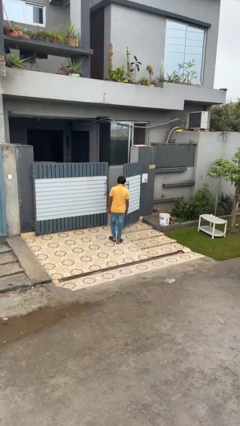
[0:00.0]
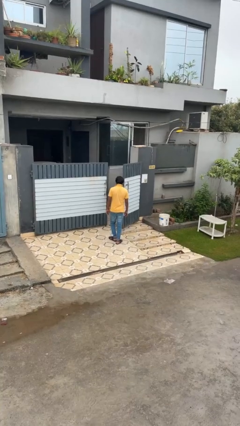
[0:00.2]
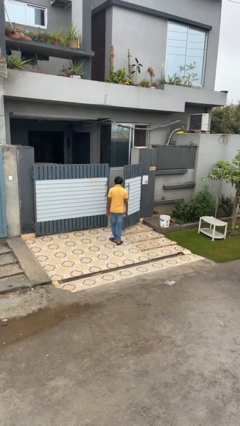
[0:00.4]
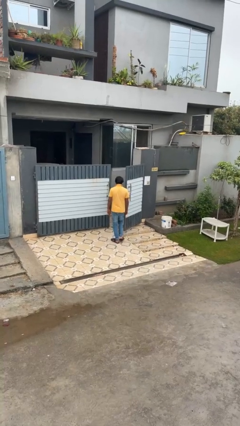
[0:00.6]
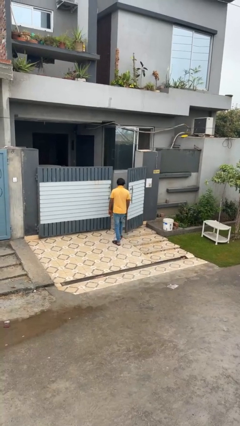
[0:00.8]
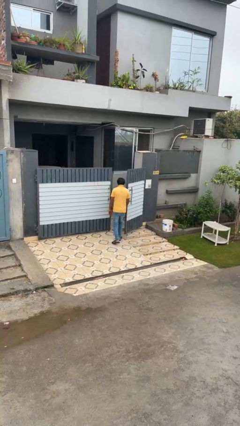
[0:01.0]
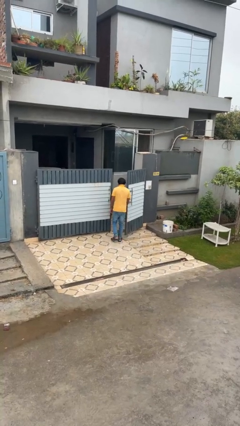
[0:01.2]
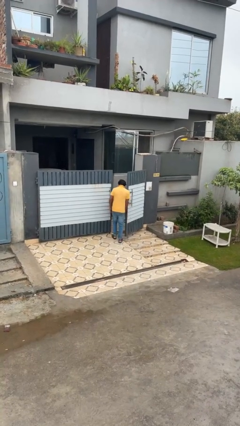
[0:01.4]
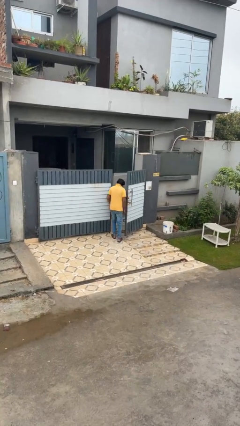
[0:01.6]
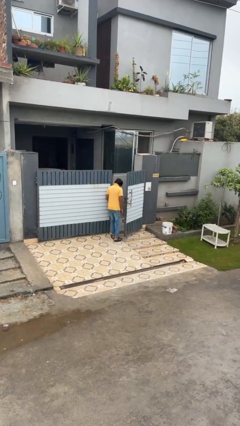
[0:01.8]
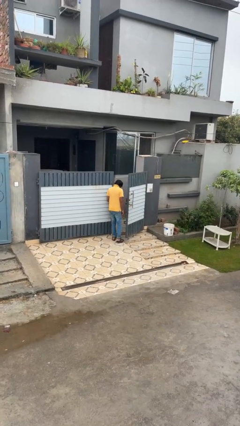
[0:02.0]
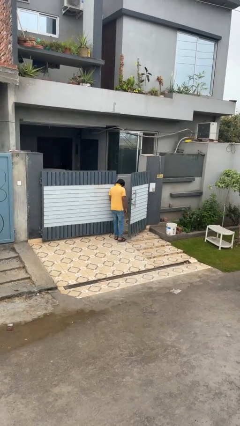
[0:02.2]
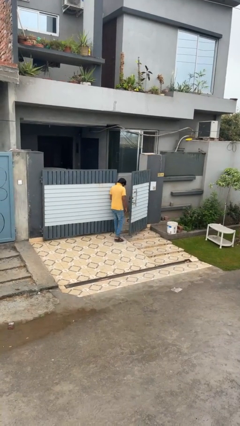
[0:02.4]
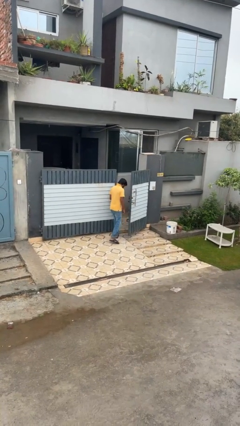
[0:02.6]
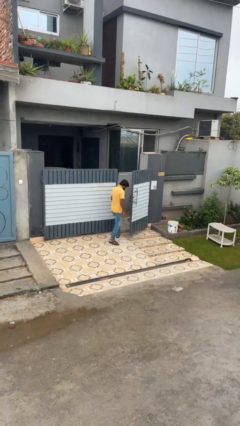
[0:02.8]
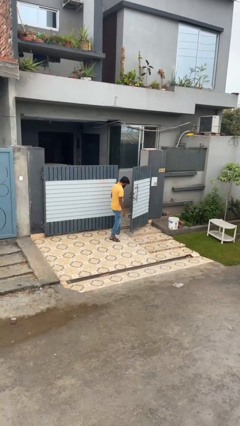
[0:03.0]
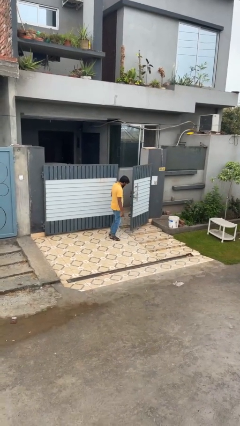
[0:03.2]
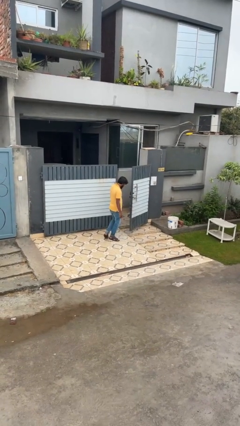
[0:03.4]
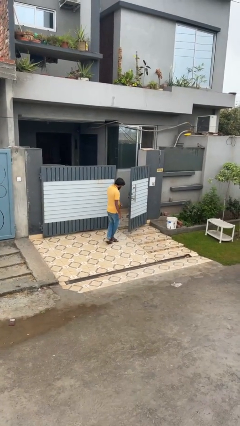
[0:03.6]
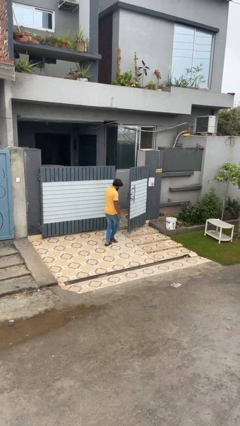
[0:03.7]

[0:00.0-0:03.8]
person bumps into wall

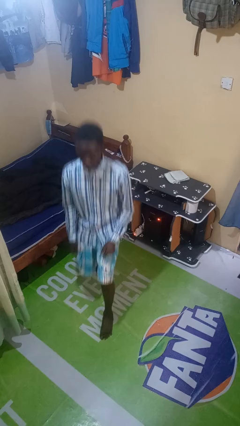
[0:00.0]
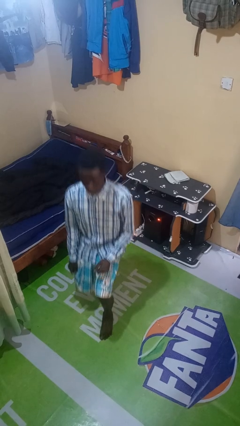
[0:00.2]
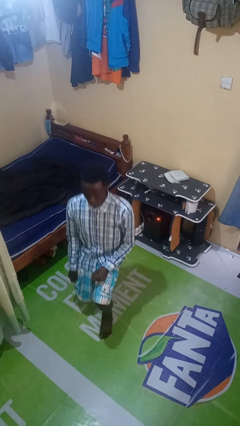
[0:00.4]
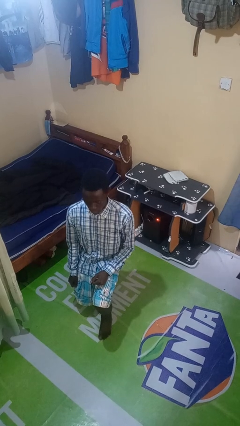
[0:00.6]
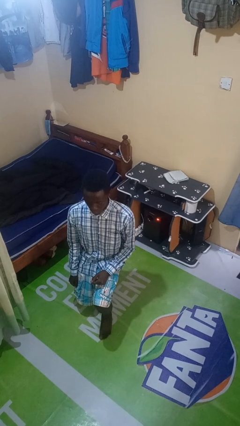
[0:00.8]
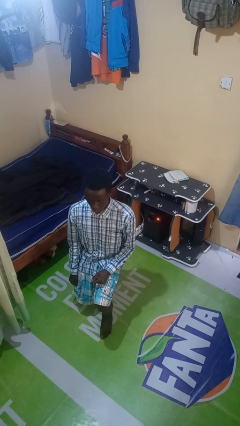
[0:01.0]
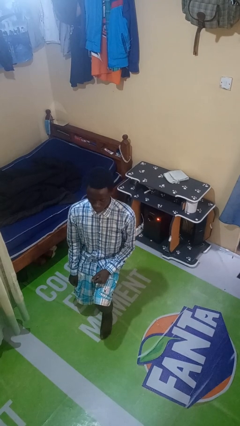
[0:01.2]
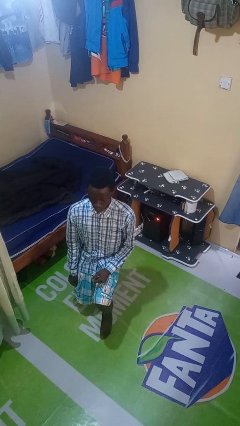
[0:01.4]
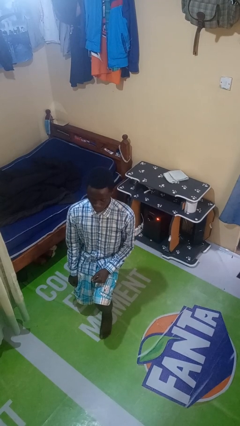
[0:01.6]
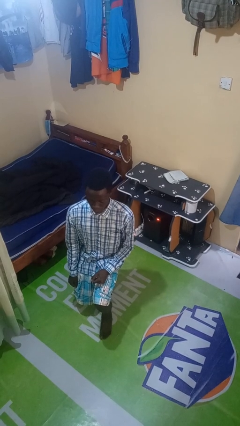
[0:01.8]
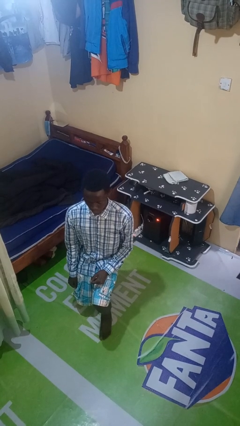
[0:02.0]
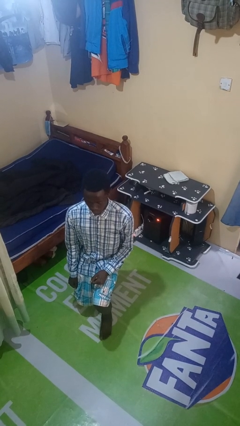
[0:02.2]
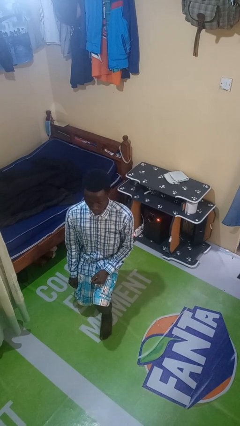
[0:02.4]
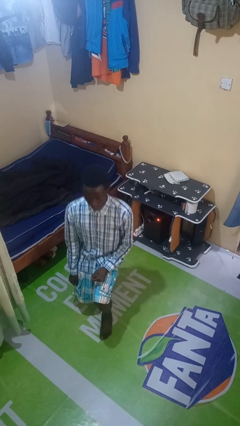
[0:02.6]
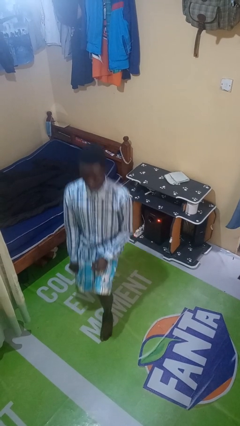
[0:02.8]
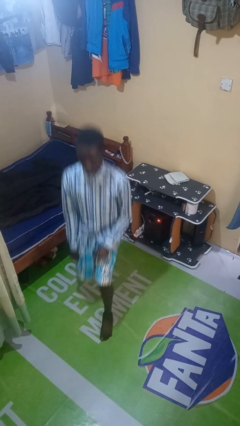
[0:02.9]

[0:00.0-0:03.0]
person exercises with lunges

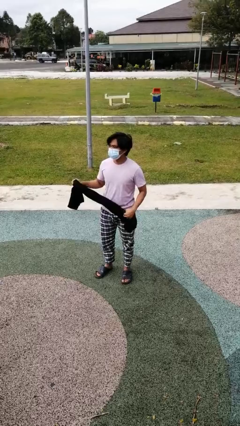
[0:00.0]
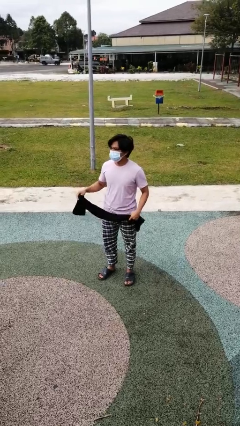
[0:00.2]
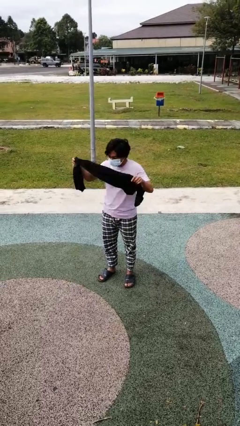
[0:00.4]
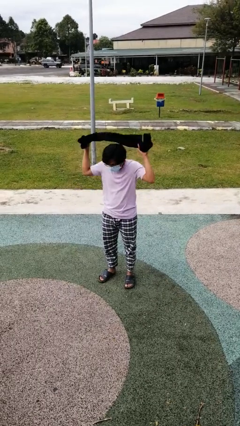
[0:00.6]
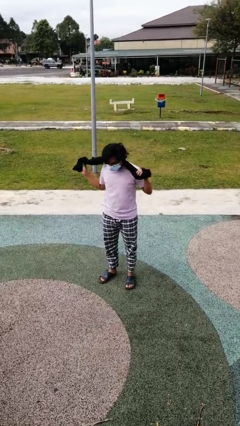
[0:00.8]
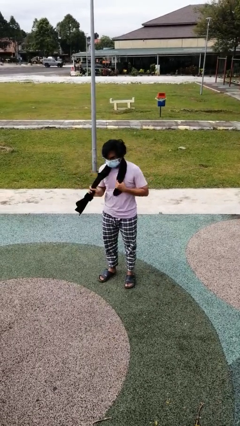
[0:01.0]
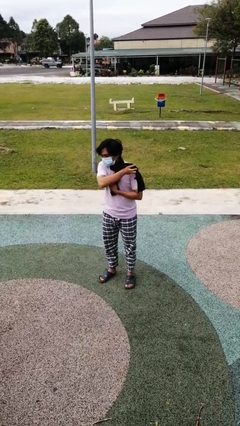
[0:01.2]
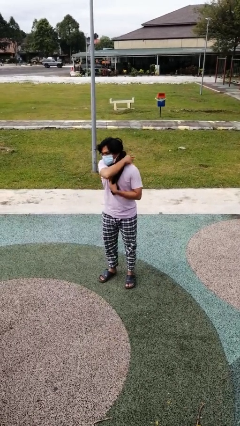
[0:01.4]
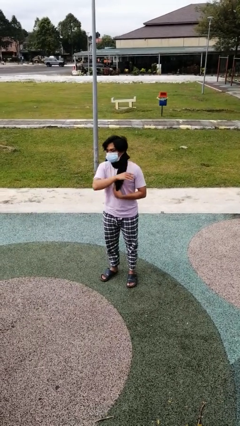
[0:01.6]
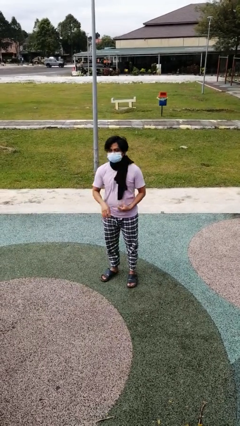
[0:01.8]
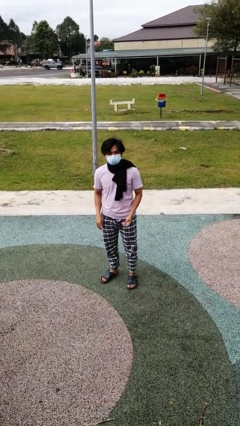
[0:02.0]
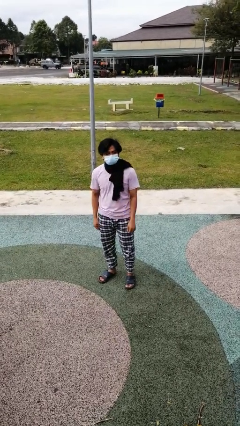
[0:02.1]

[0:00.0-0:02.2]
person puts on scarf

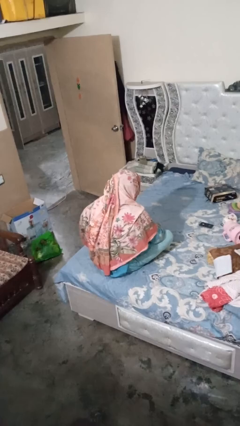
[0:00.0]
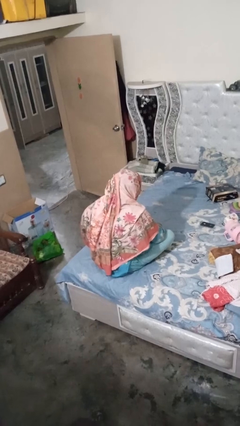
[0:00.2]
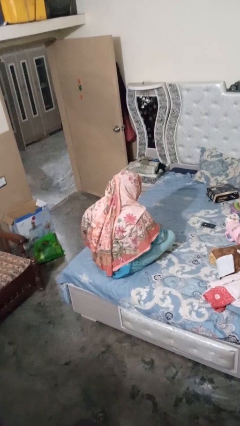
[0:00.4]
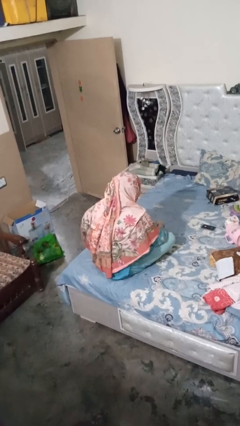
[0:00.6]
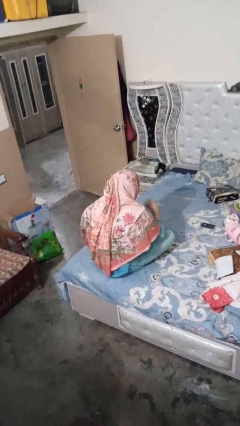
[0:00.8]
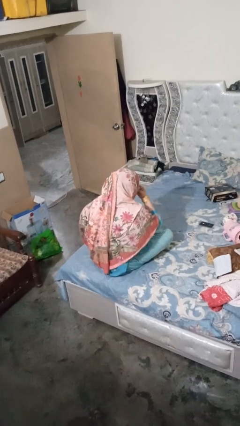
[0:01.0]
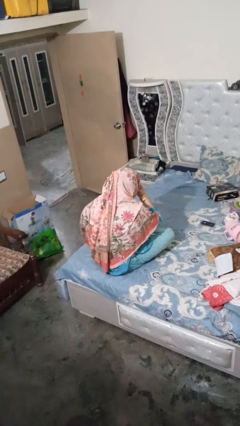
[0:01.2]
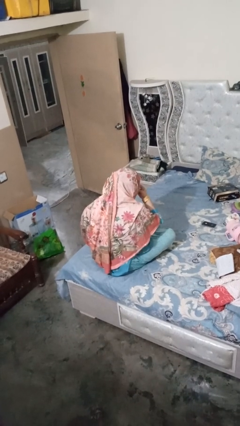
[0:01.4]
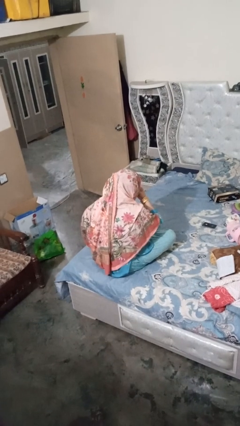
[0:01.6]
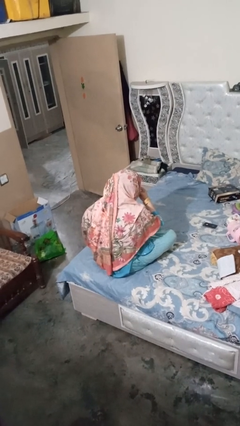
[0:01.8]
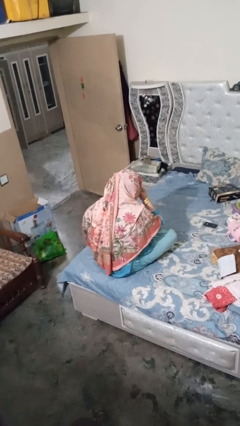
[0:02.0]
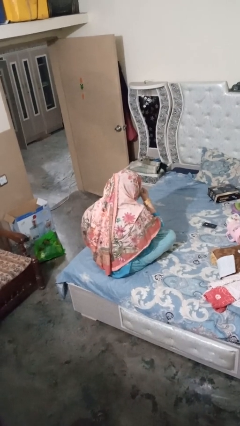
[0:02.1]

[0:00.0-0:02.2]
person blows nose

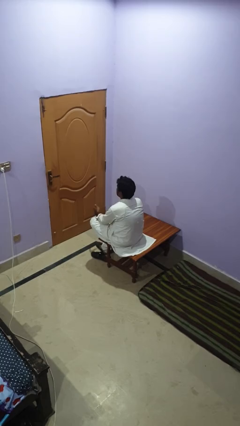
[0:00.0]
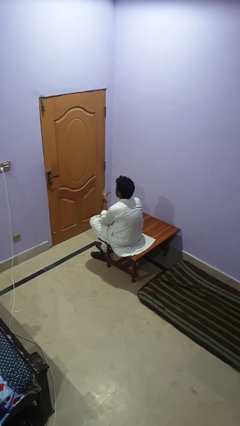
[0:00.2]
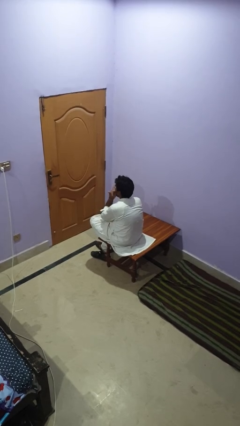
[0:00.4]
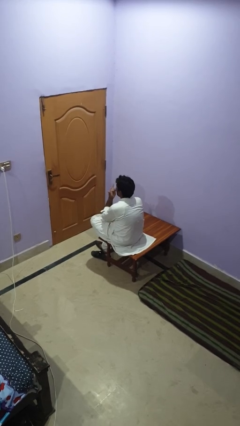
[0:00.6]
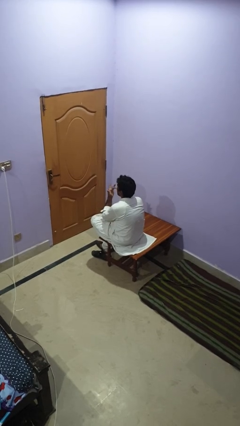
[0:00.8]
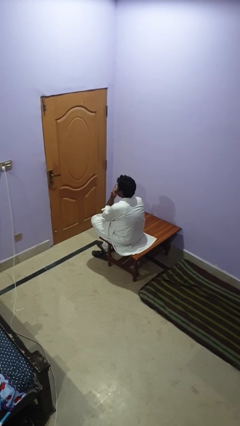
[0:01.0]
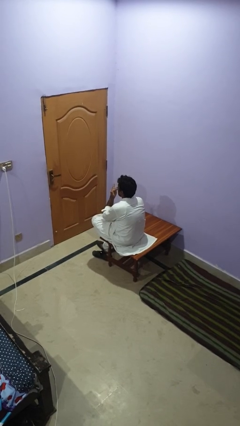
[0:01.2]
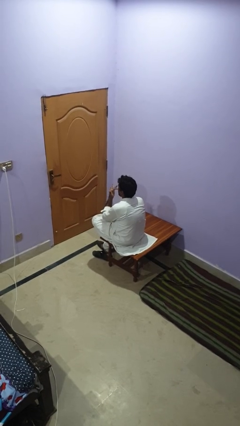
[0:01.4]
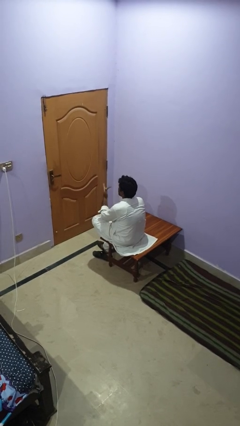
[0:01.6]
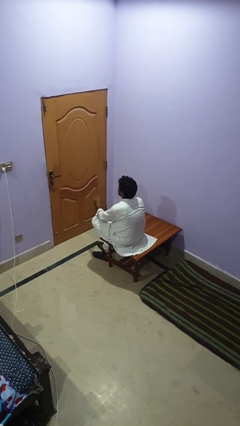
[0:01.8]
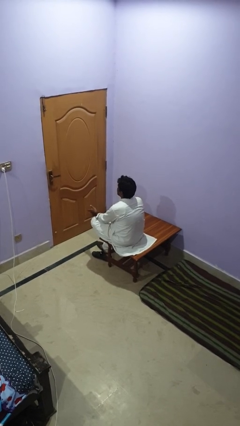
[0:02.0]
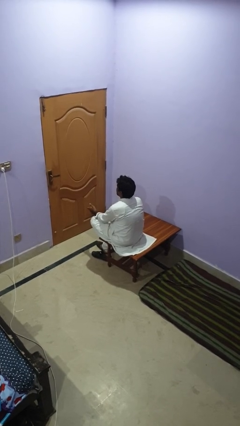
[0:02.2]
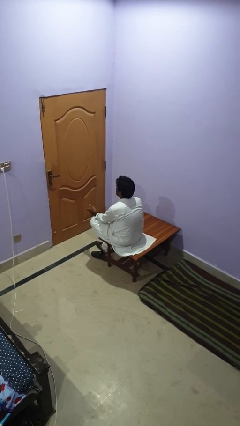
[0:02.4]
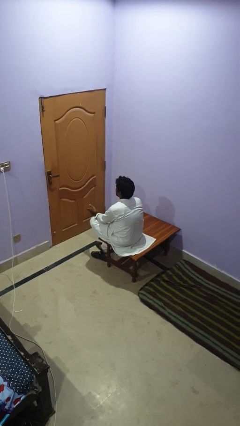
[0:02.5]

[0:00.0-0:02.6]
person licks fingers

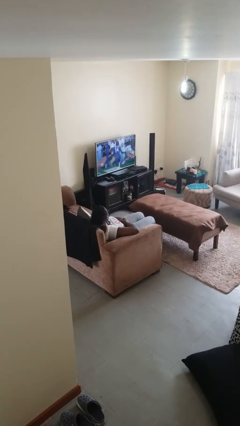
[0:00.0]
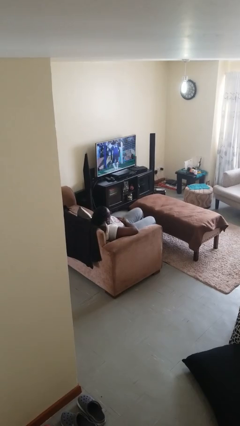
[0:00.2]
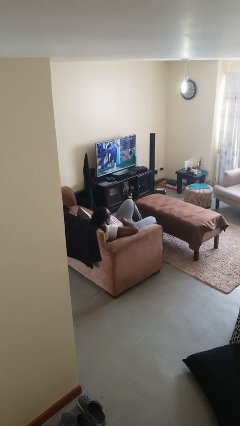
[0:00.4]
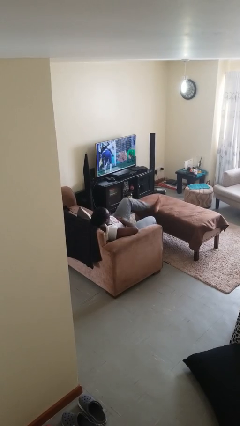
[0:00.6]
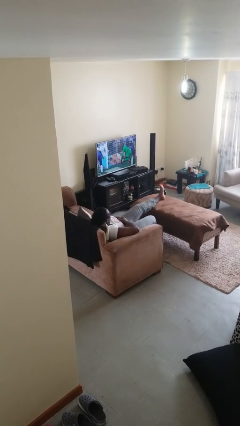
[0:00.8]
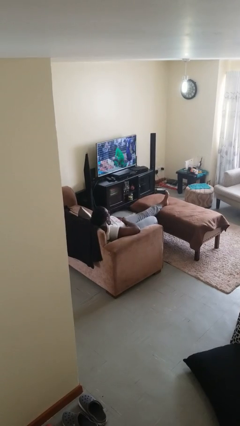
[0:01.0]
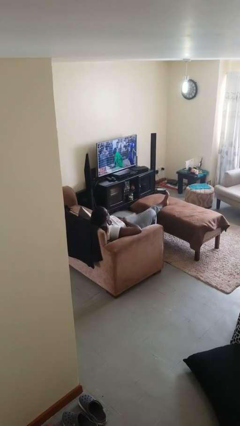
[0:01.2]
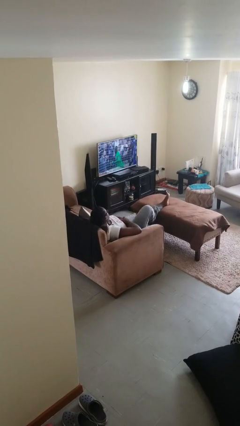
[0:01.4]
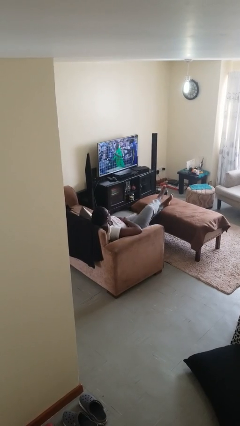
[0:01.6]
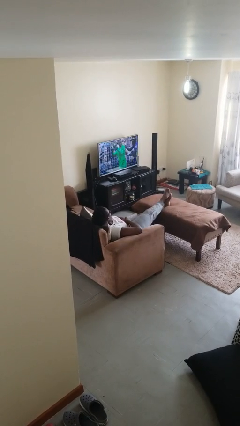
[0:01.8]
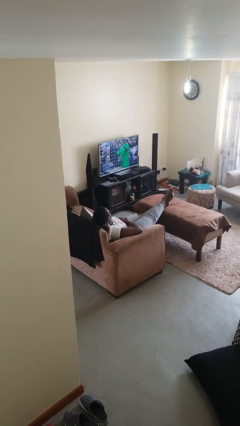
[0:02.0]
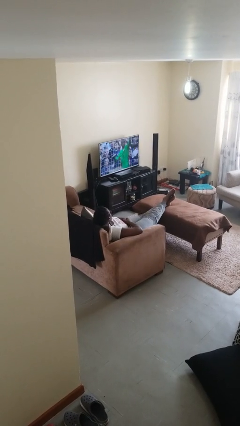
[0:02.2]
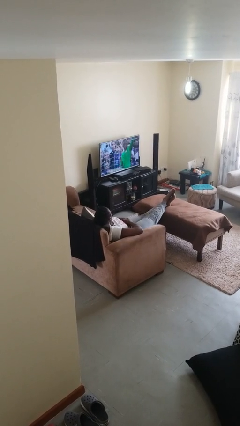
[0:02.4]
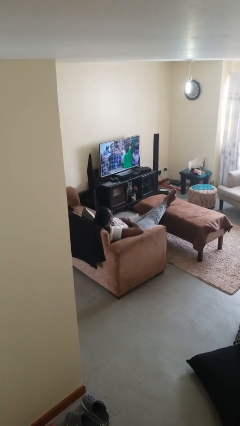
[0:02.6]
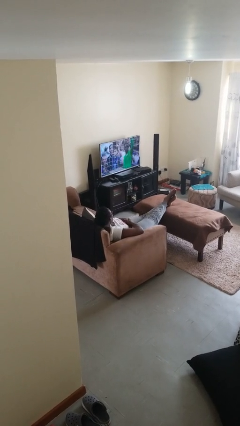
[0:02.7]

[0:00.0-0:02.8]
person puts feet up

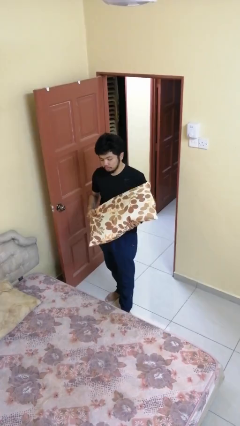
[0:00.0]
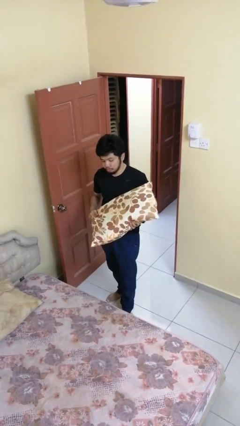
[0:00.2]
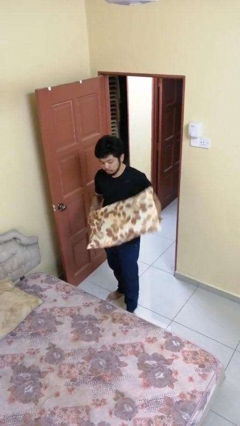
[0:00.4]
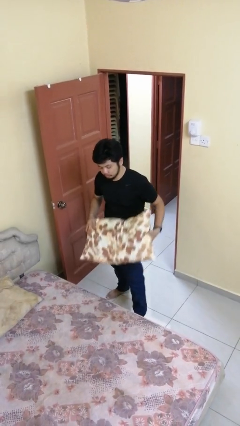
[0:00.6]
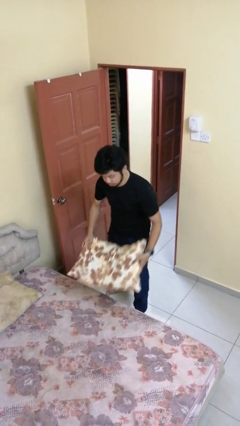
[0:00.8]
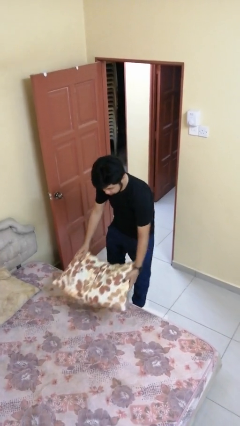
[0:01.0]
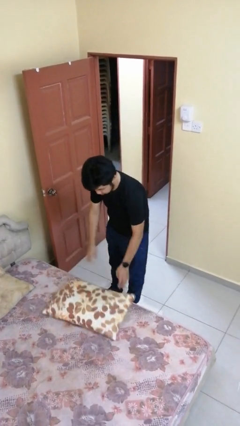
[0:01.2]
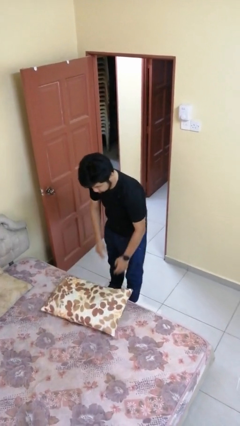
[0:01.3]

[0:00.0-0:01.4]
person puts down object on bed
